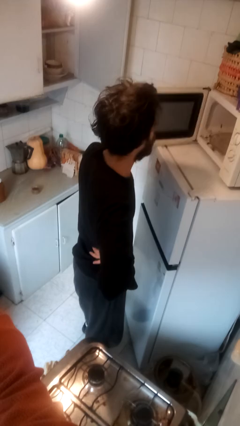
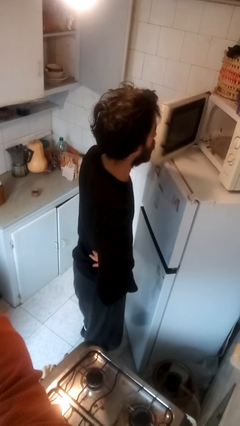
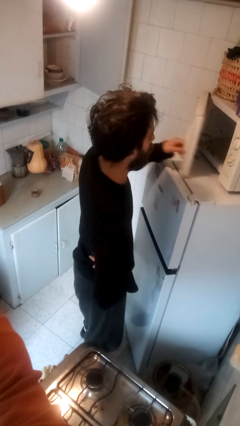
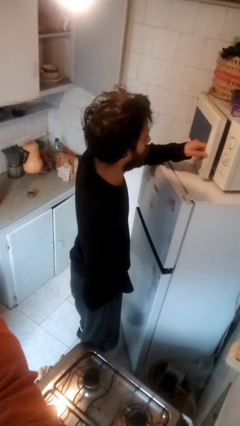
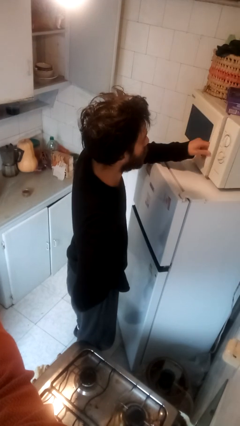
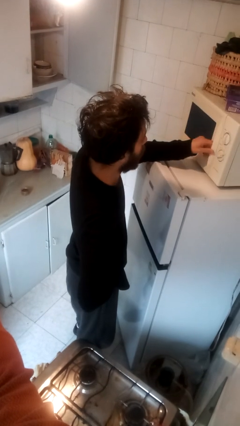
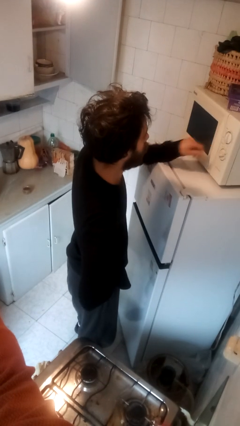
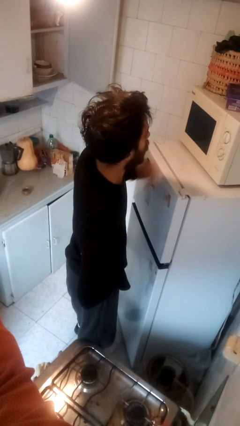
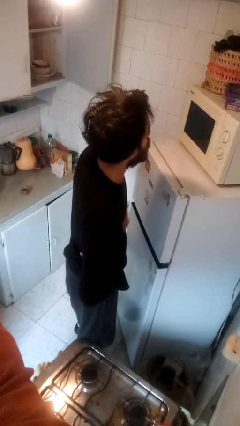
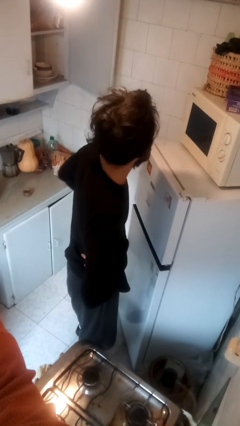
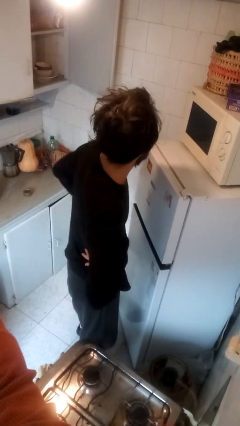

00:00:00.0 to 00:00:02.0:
person closes microwave

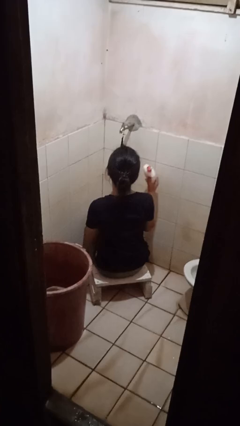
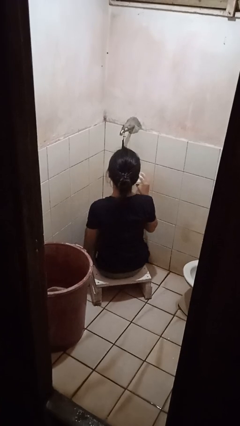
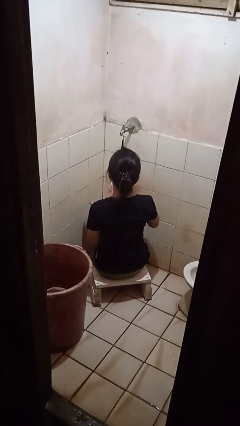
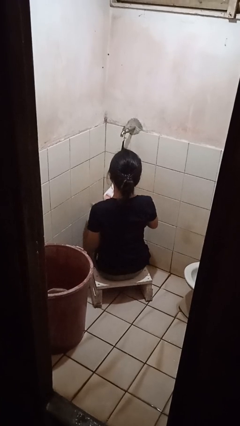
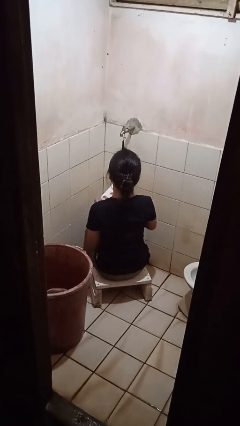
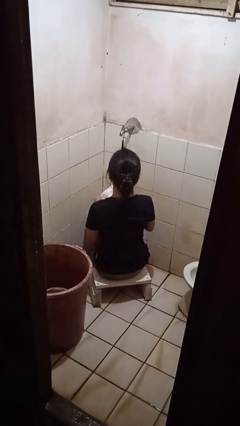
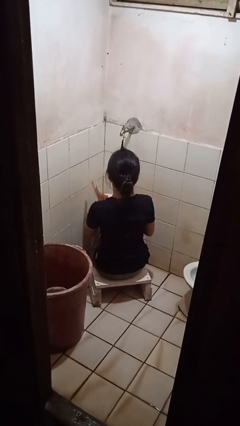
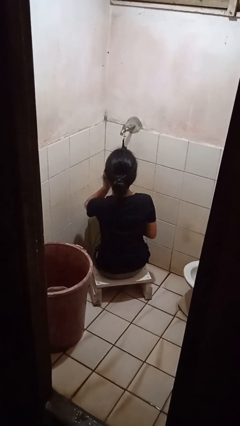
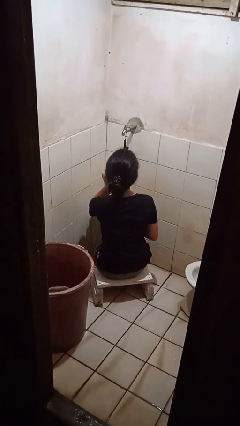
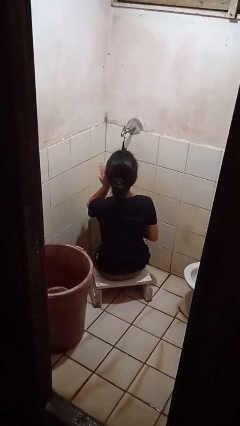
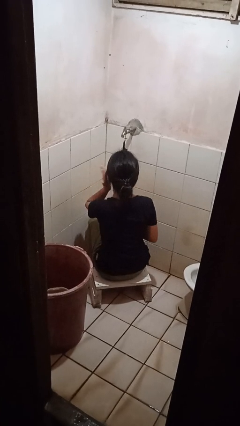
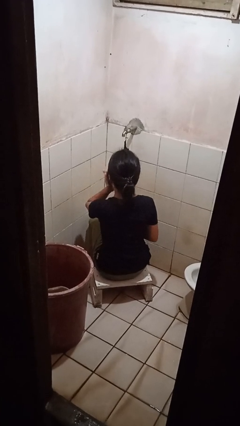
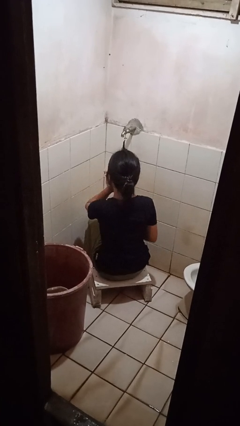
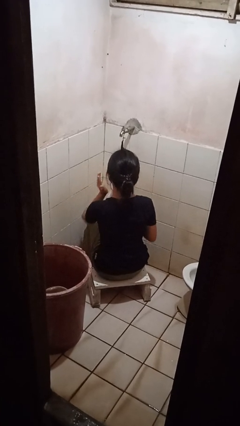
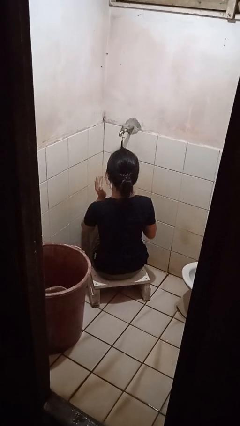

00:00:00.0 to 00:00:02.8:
person applies facial moisturizer

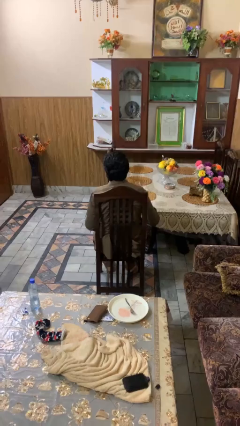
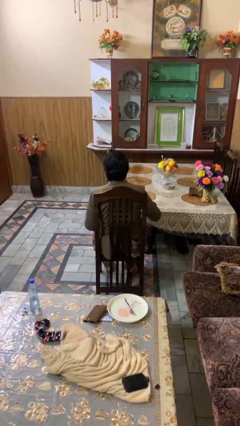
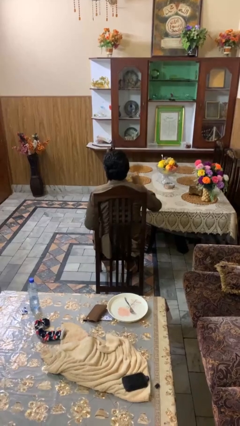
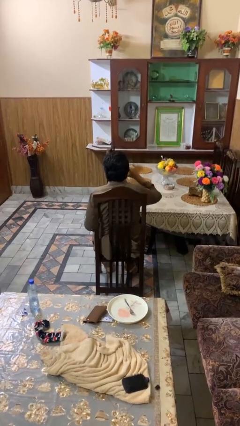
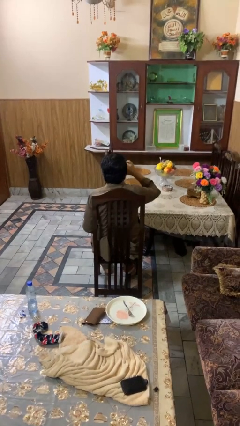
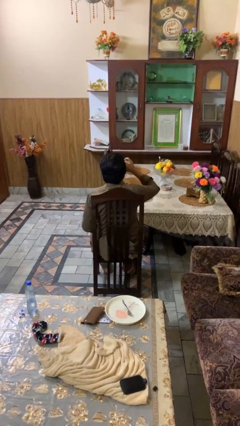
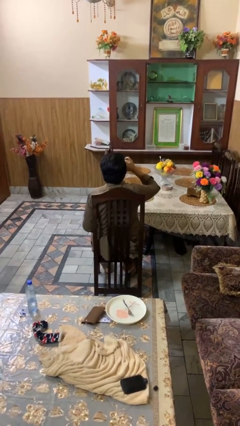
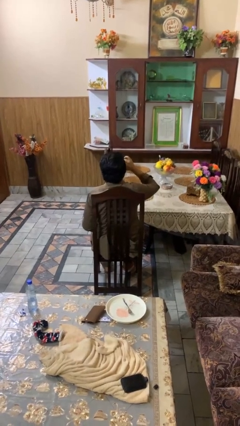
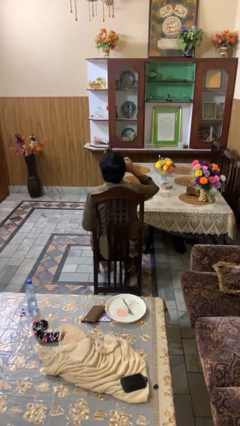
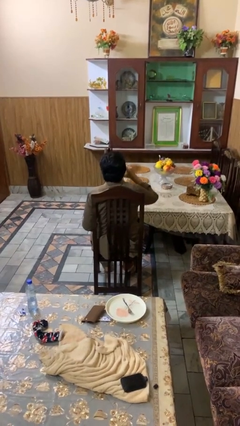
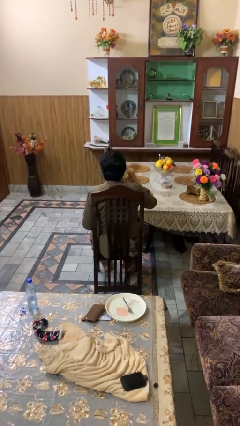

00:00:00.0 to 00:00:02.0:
person drinks from shotglass

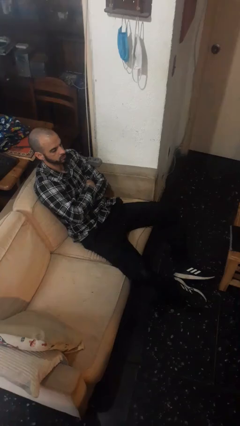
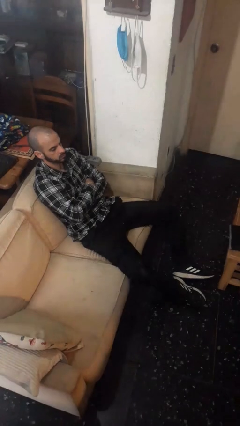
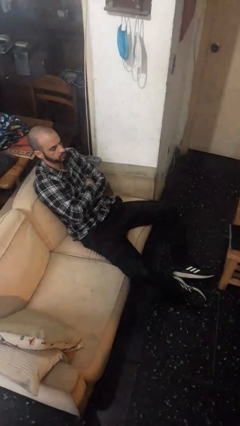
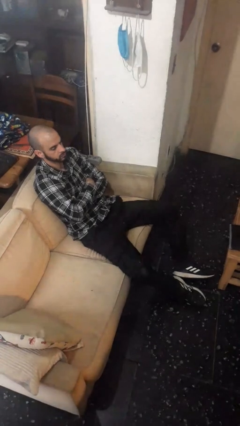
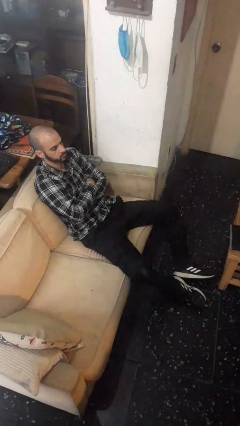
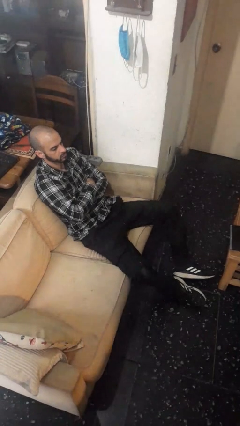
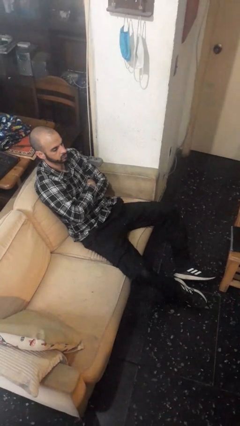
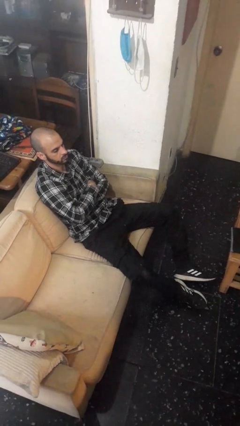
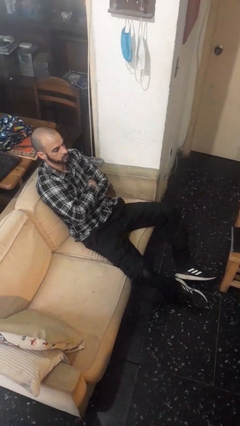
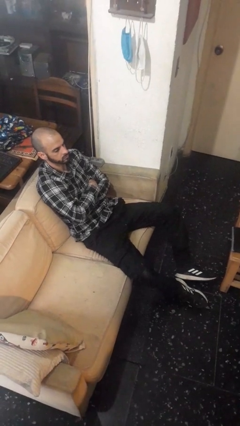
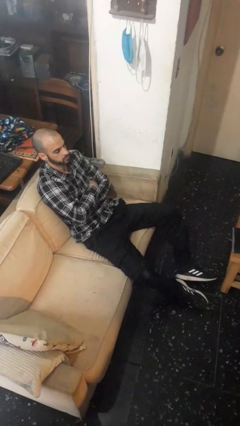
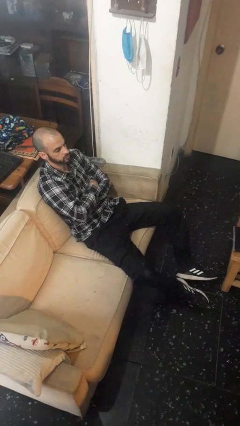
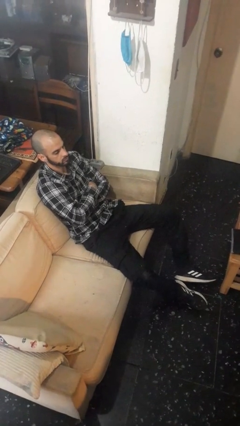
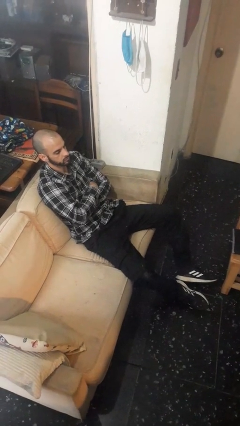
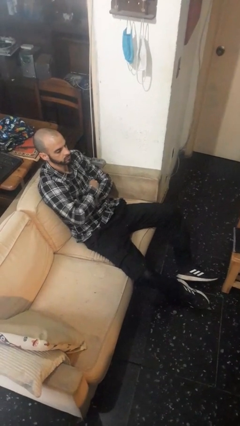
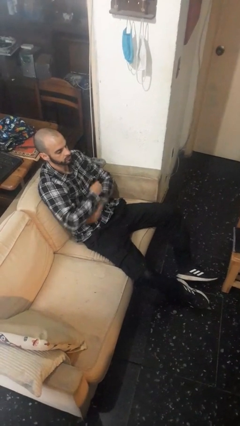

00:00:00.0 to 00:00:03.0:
person crosses arms

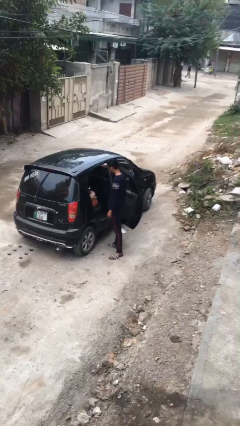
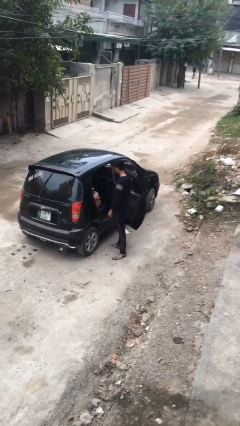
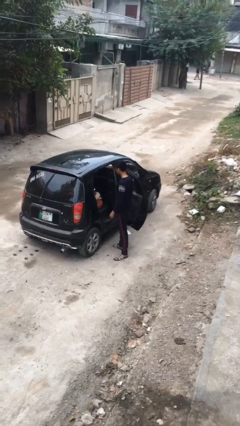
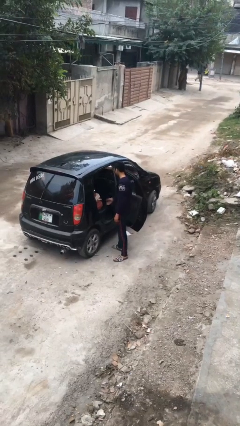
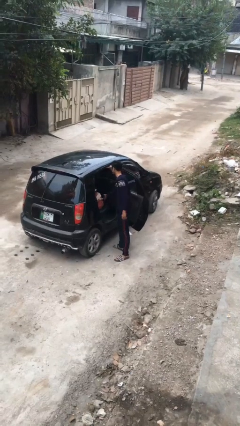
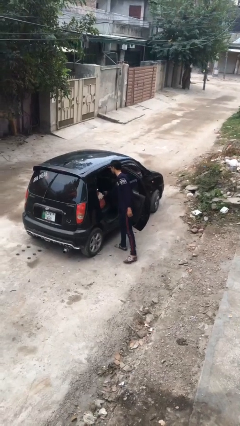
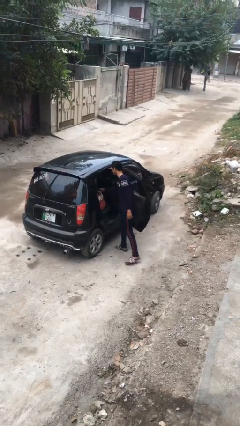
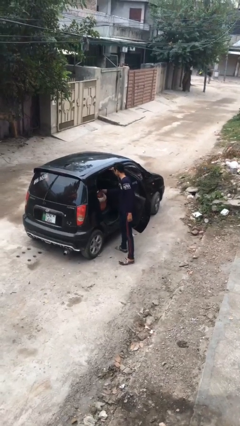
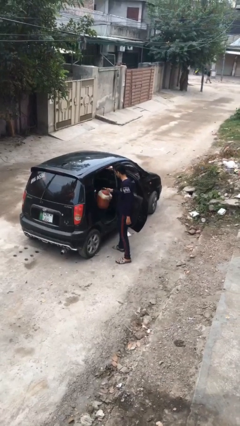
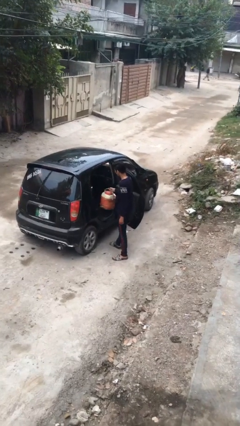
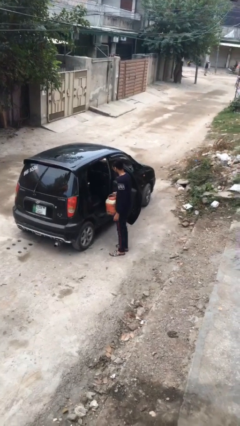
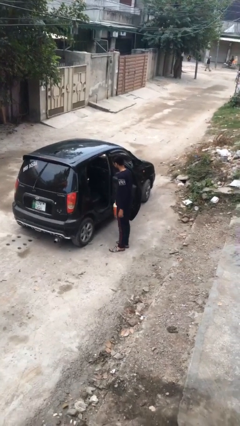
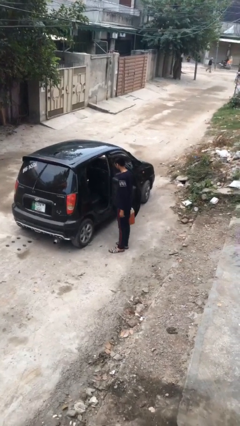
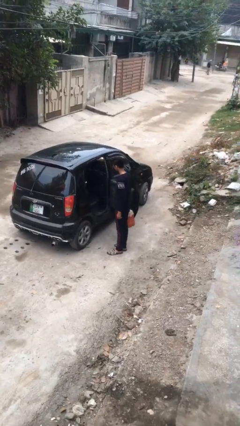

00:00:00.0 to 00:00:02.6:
person unloads car

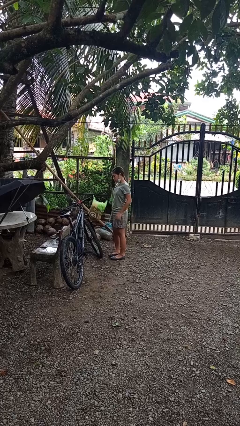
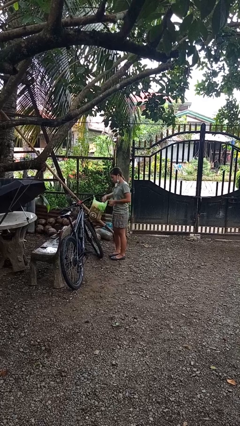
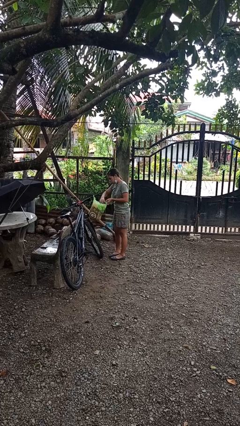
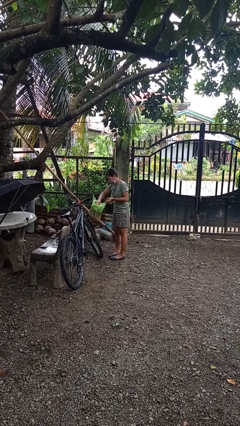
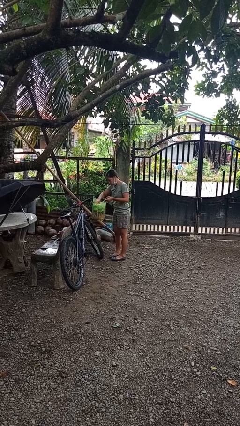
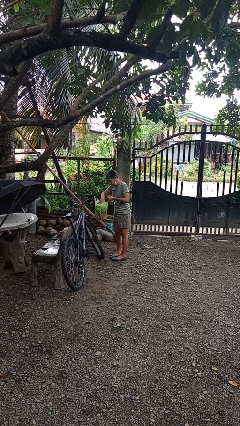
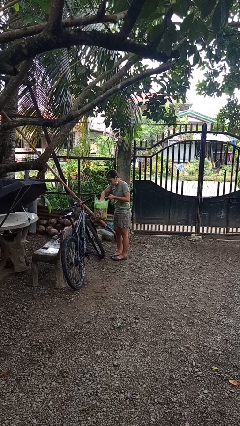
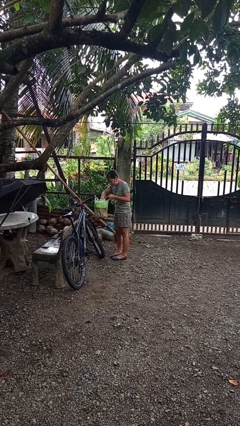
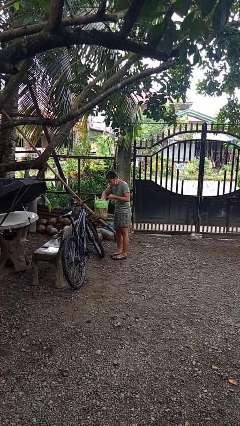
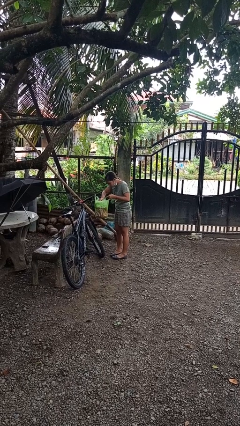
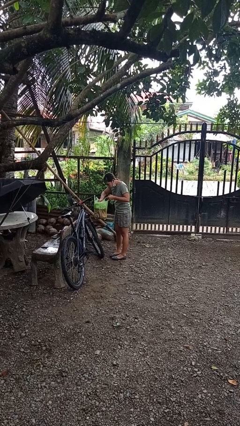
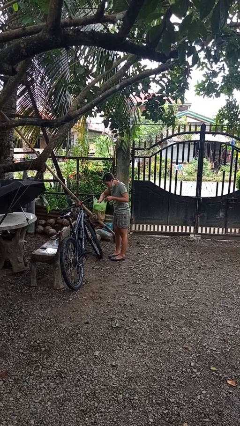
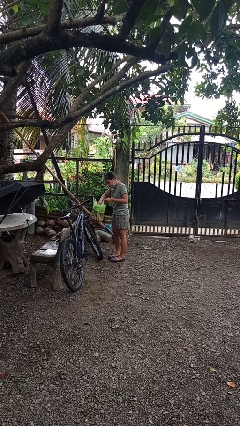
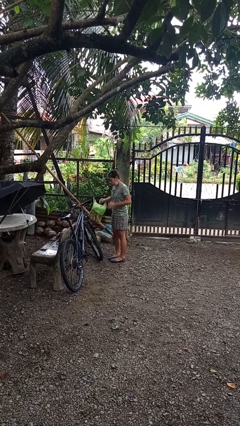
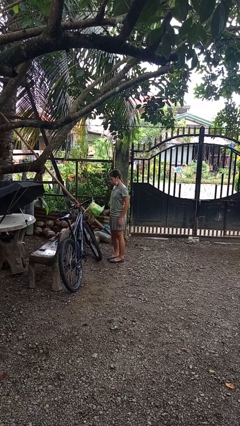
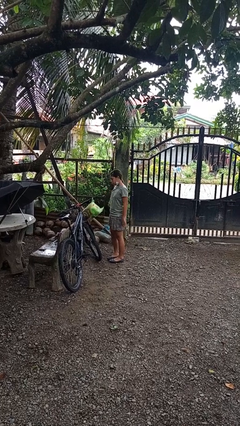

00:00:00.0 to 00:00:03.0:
person searches in bag

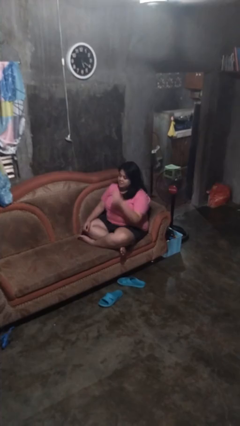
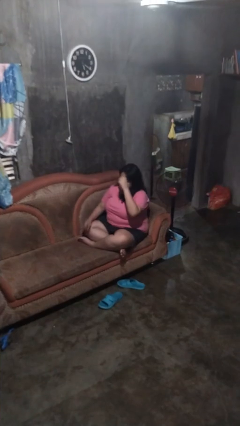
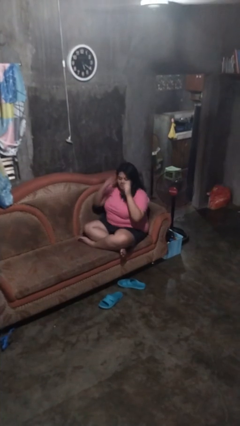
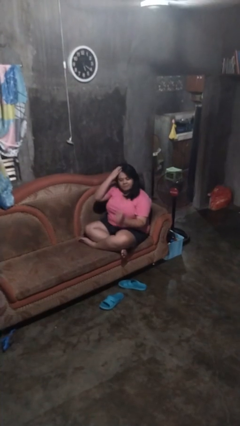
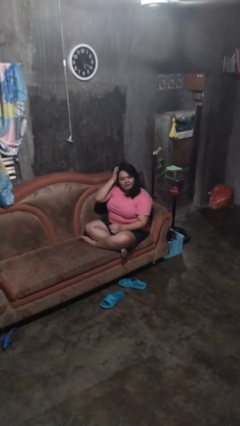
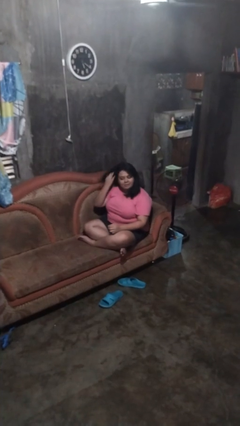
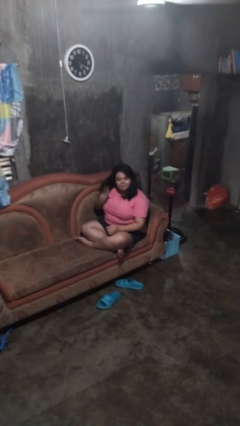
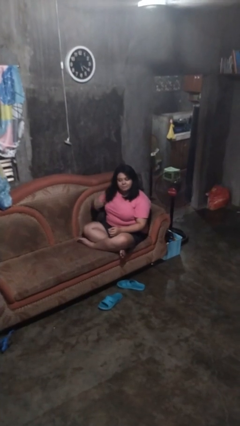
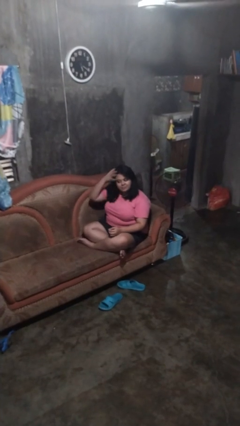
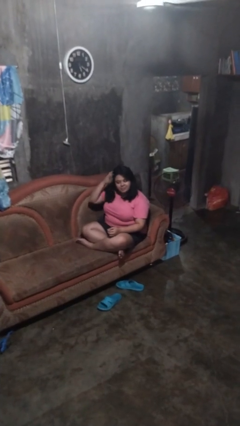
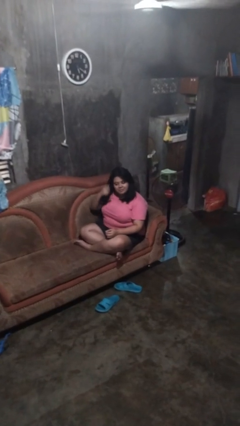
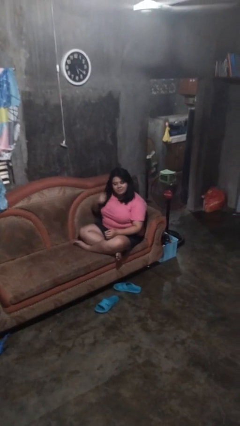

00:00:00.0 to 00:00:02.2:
person strokes hair
